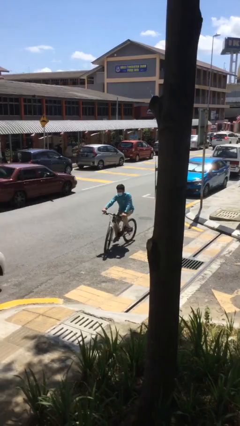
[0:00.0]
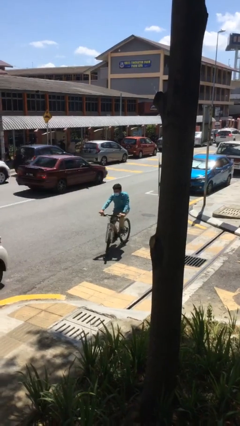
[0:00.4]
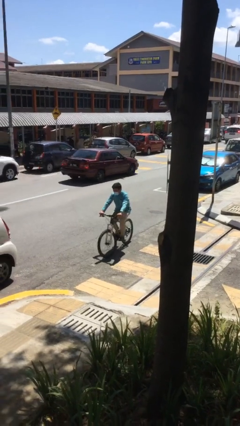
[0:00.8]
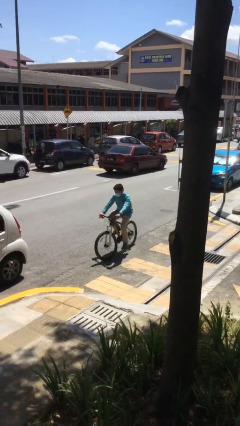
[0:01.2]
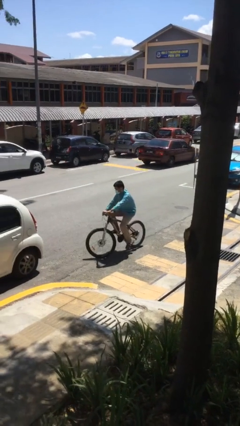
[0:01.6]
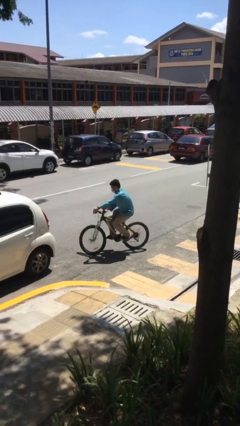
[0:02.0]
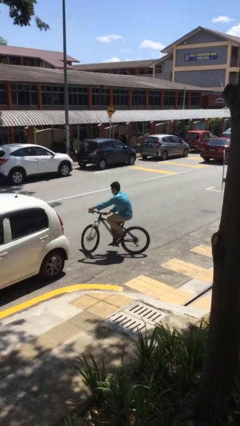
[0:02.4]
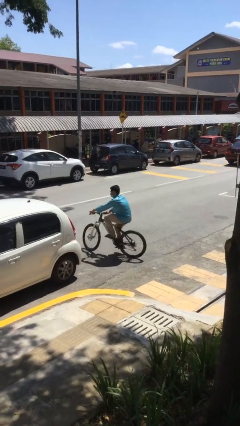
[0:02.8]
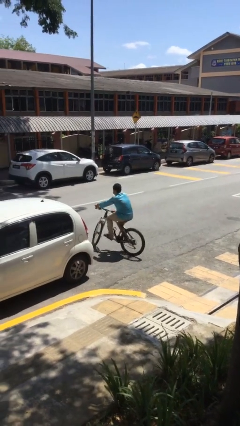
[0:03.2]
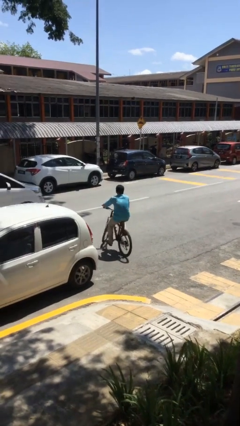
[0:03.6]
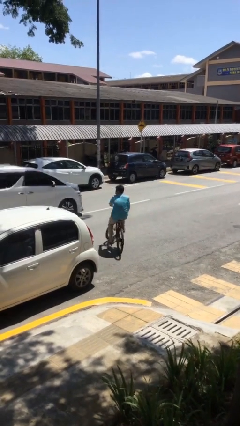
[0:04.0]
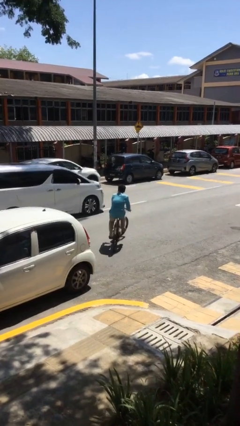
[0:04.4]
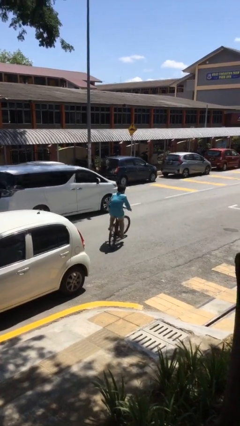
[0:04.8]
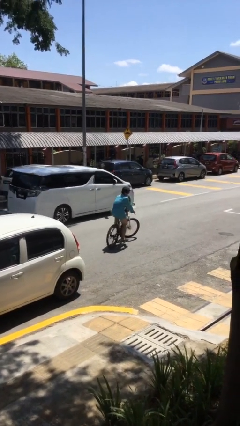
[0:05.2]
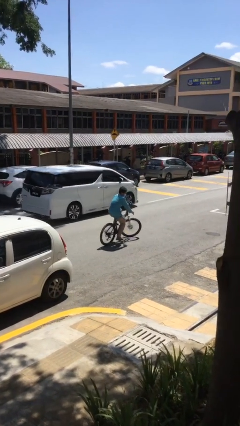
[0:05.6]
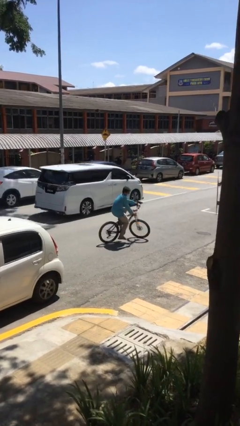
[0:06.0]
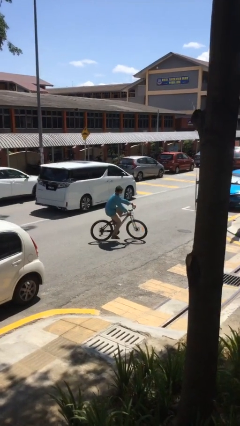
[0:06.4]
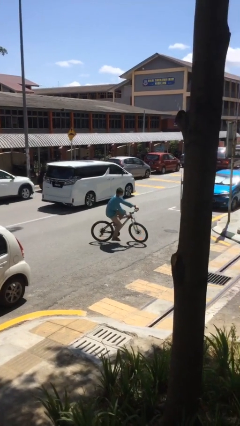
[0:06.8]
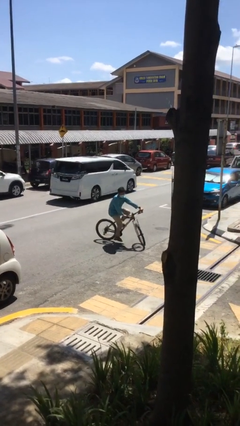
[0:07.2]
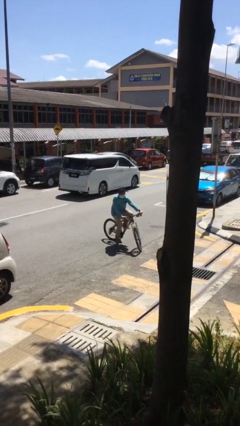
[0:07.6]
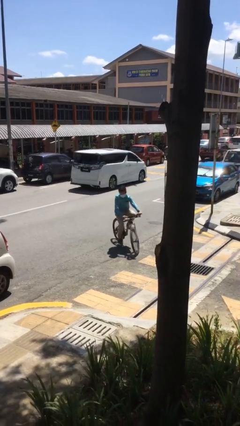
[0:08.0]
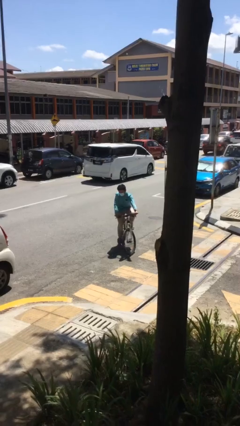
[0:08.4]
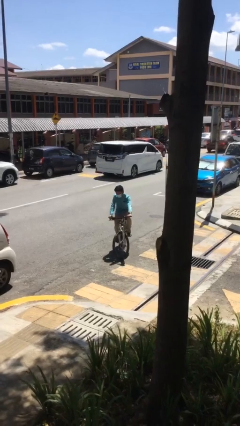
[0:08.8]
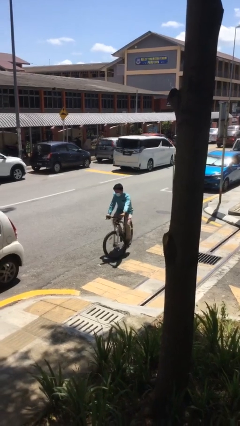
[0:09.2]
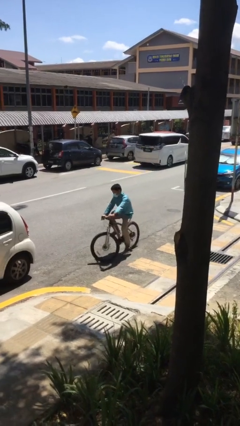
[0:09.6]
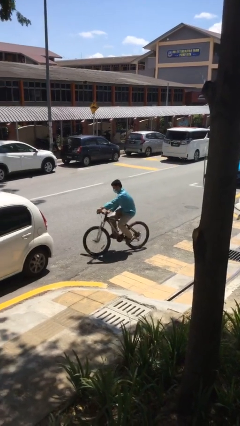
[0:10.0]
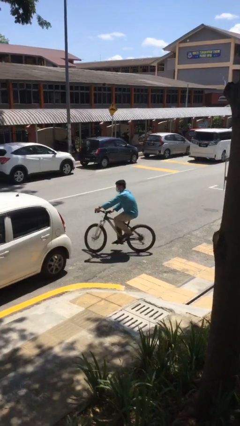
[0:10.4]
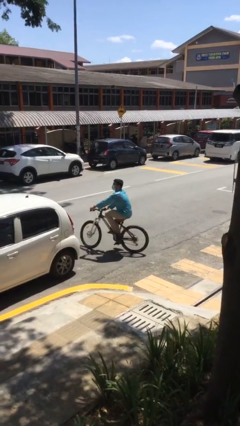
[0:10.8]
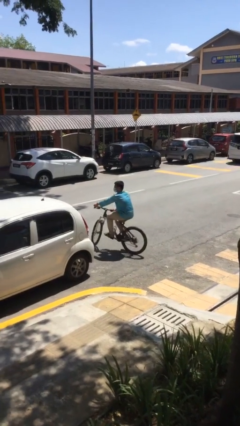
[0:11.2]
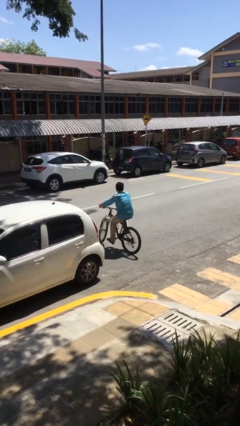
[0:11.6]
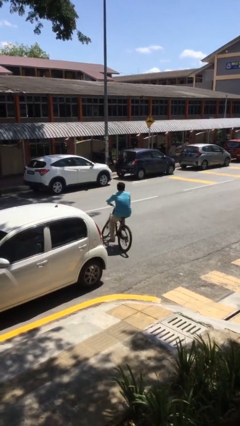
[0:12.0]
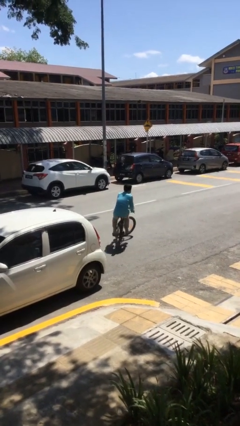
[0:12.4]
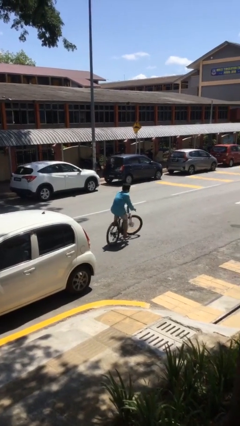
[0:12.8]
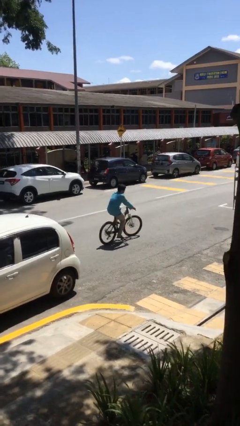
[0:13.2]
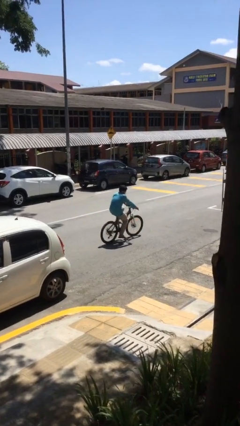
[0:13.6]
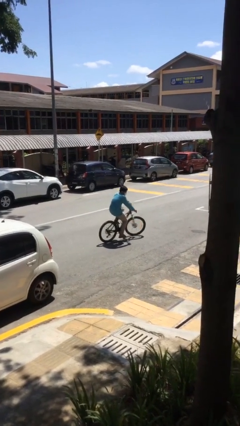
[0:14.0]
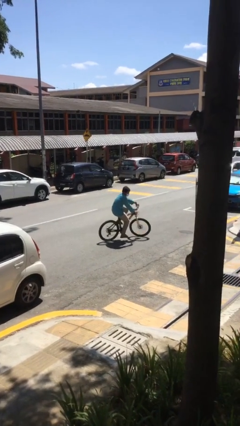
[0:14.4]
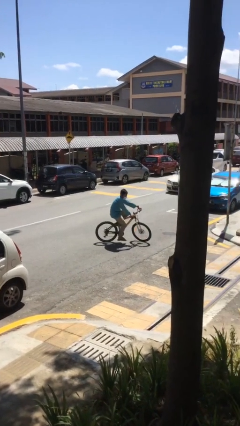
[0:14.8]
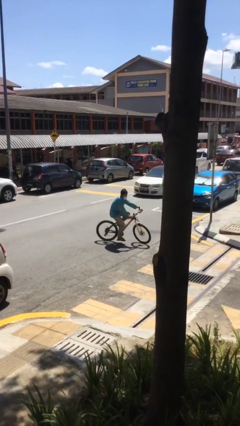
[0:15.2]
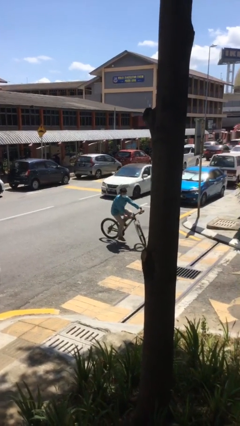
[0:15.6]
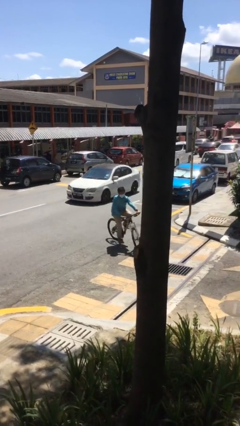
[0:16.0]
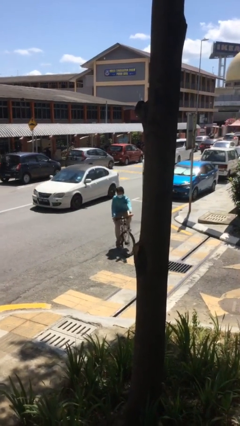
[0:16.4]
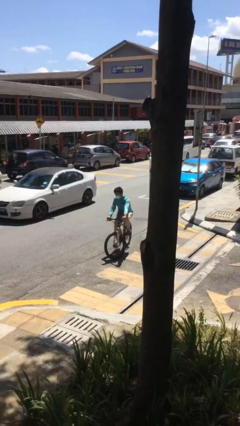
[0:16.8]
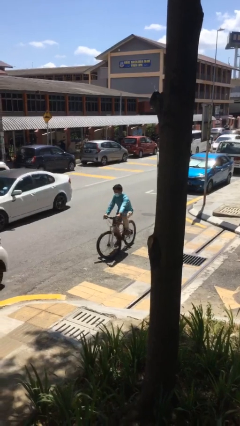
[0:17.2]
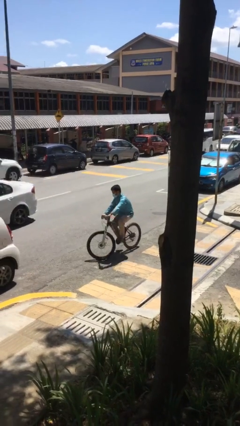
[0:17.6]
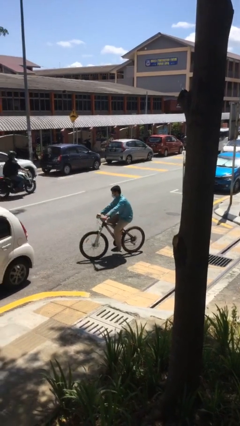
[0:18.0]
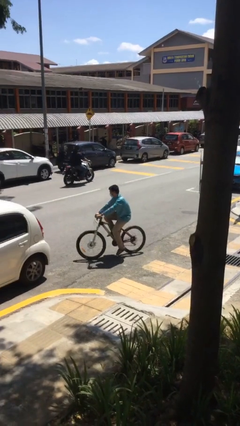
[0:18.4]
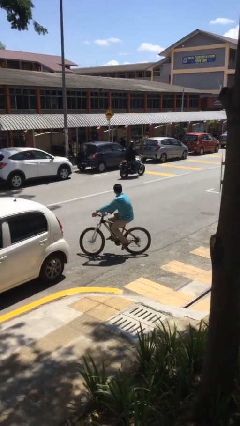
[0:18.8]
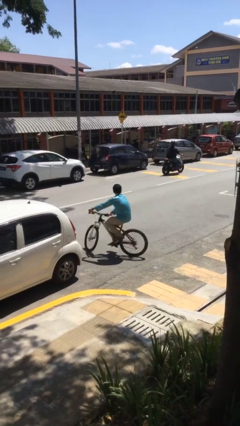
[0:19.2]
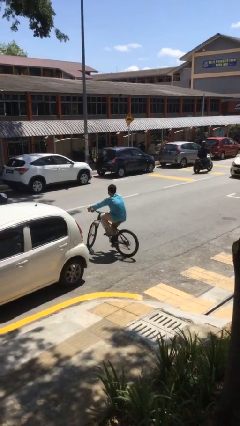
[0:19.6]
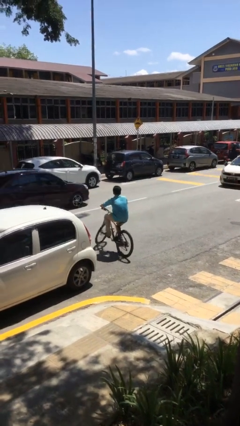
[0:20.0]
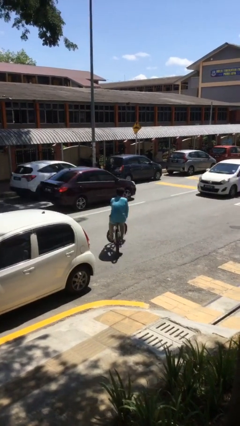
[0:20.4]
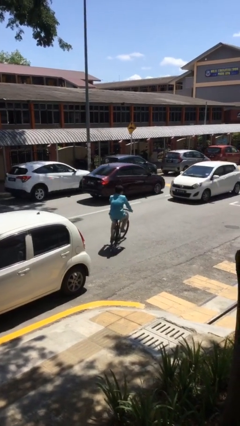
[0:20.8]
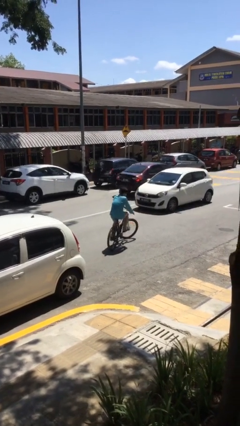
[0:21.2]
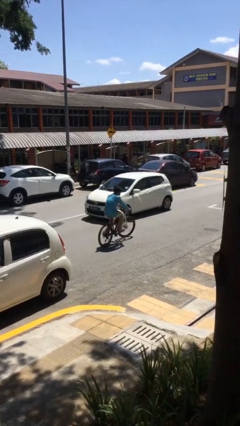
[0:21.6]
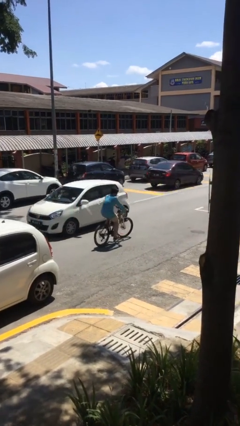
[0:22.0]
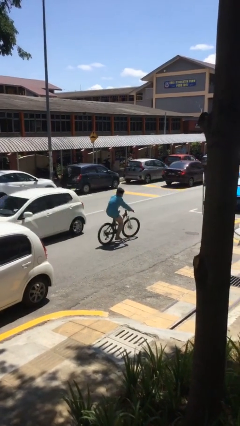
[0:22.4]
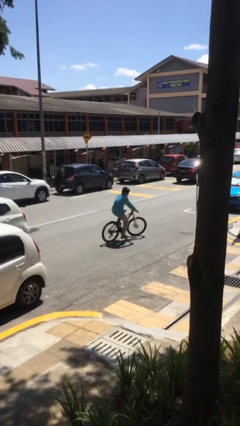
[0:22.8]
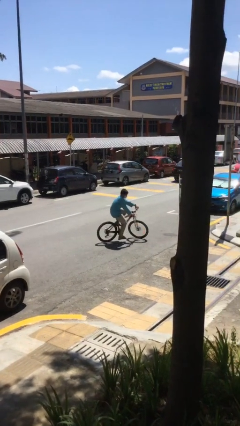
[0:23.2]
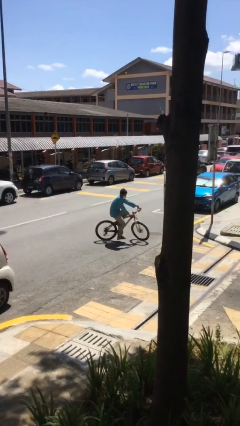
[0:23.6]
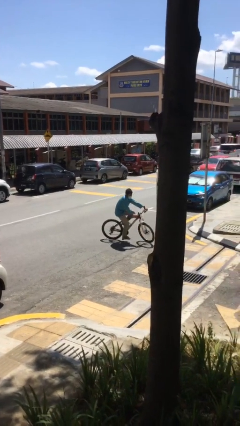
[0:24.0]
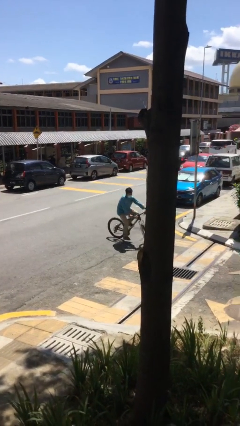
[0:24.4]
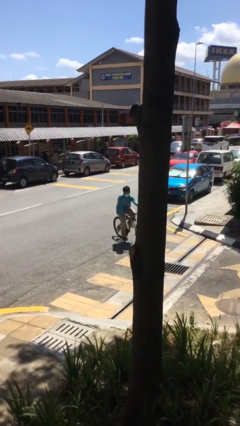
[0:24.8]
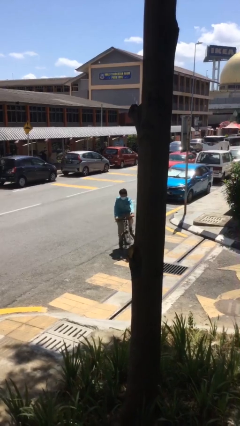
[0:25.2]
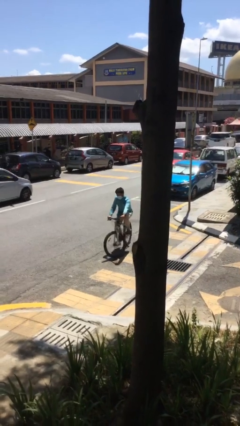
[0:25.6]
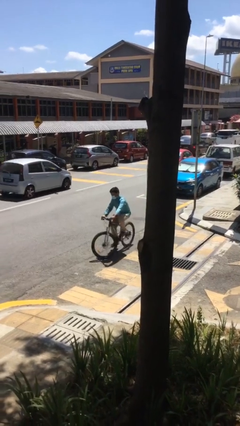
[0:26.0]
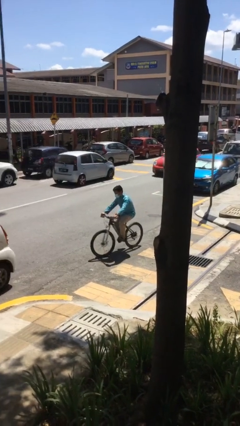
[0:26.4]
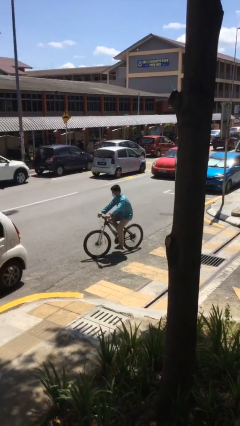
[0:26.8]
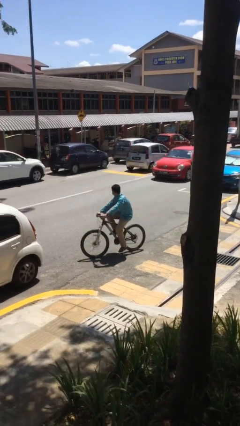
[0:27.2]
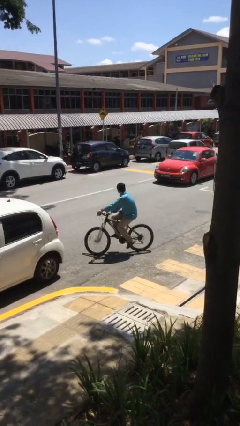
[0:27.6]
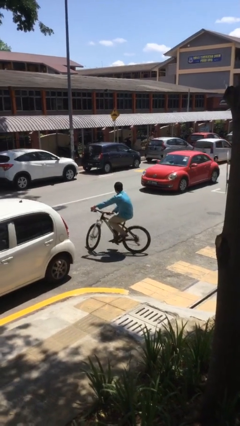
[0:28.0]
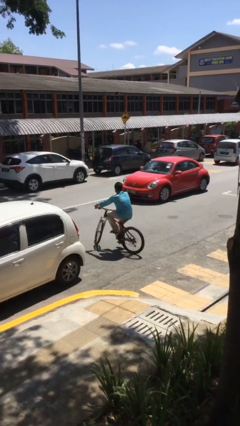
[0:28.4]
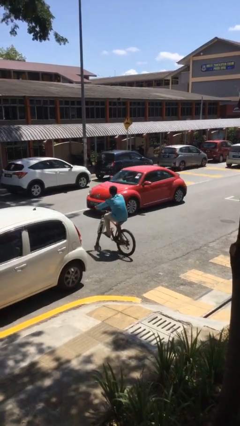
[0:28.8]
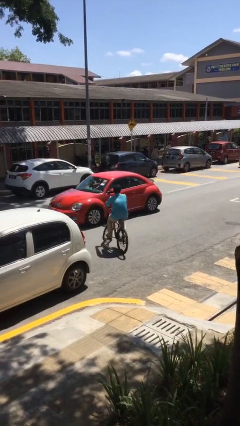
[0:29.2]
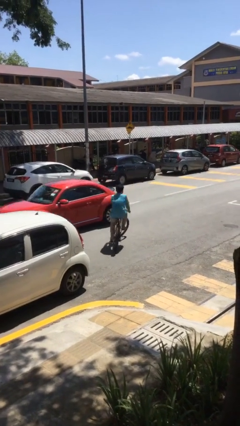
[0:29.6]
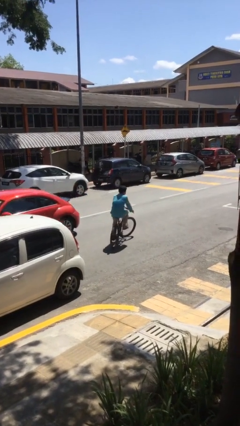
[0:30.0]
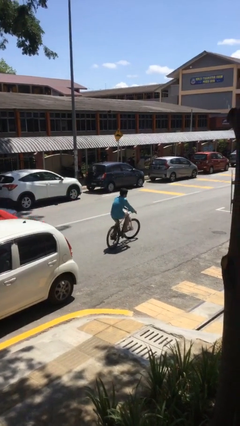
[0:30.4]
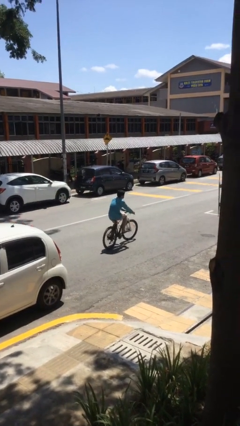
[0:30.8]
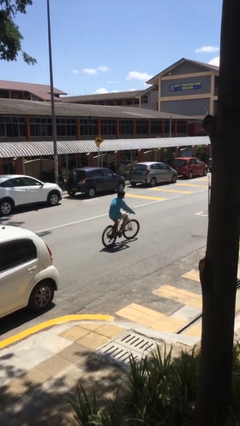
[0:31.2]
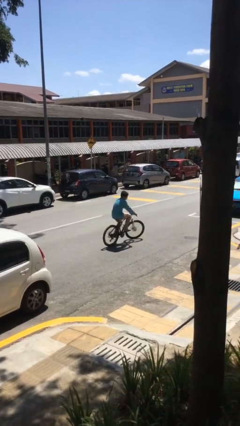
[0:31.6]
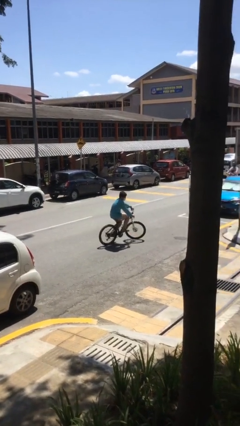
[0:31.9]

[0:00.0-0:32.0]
person rides bicycle

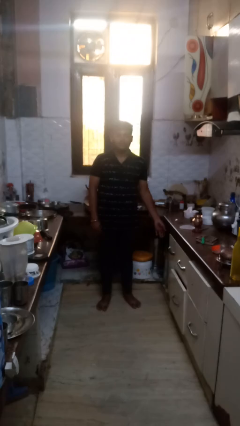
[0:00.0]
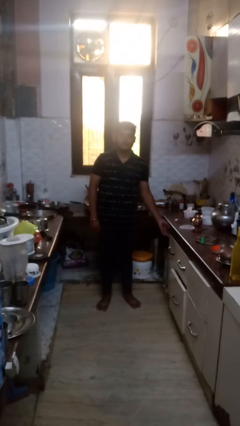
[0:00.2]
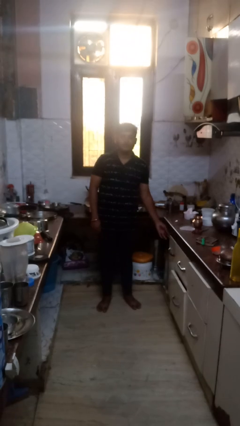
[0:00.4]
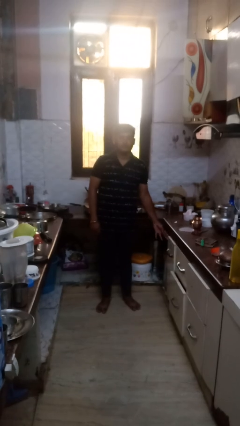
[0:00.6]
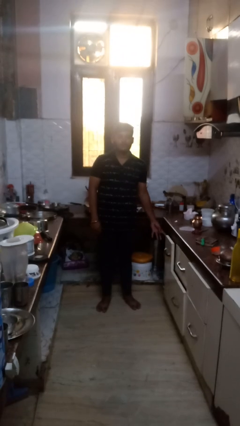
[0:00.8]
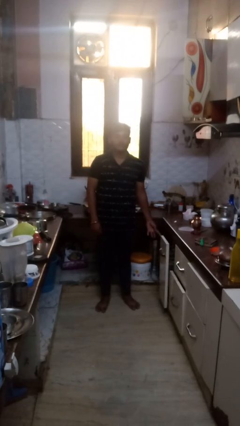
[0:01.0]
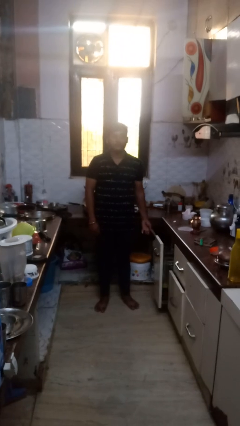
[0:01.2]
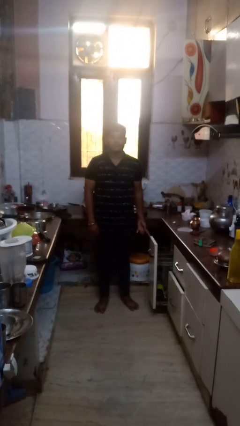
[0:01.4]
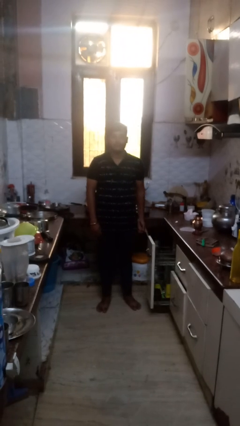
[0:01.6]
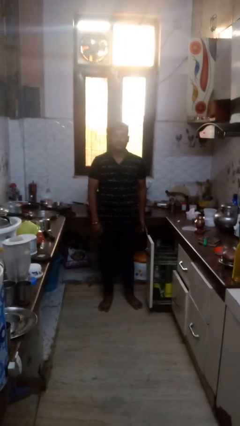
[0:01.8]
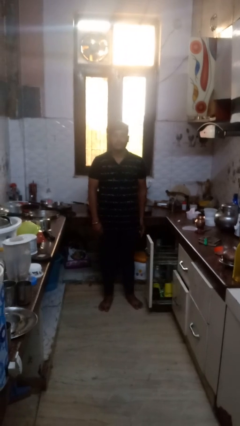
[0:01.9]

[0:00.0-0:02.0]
person opens dishwasher
